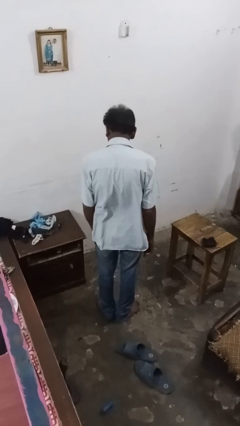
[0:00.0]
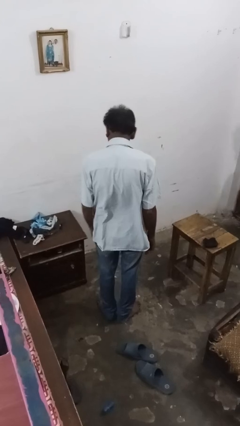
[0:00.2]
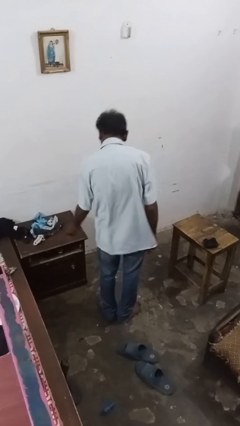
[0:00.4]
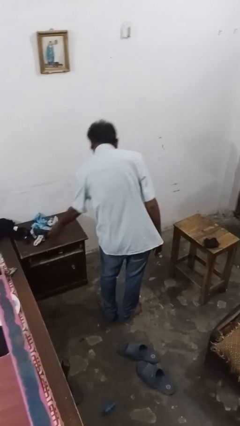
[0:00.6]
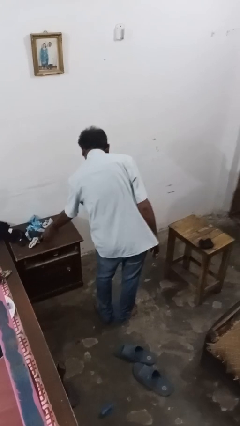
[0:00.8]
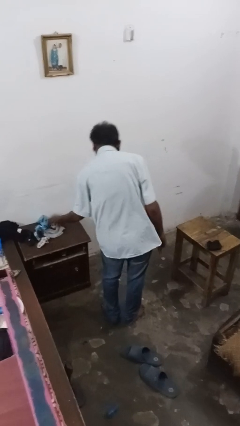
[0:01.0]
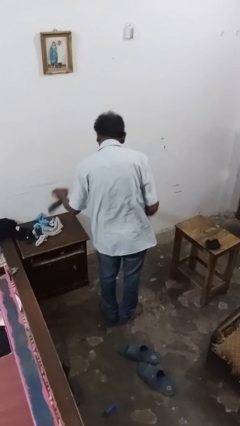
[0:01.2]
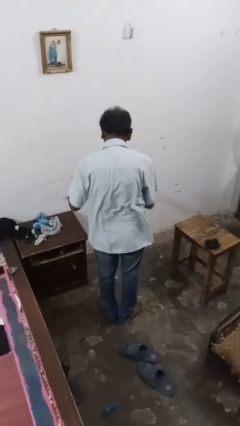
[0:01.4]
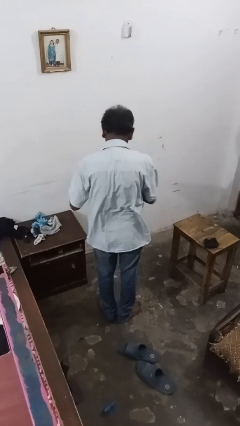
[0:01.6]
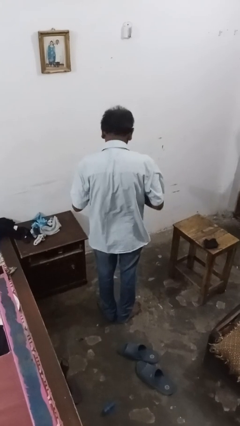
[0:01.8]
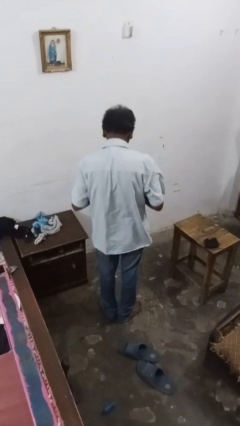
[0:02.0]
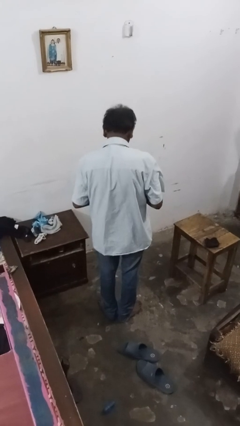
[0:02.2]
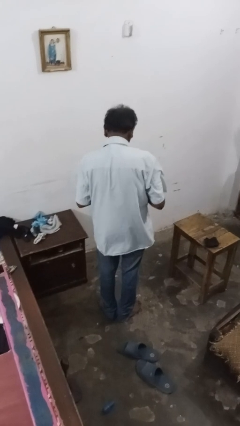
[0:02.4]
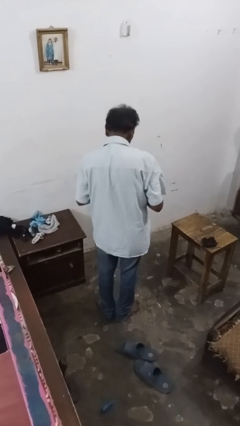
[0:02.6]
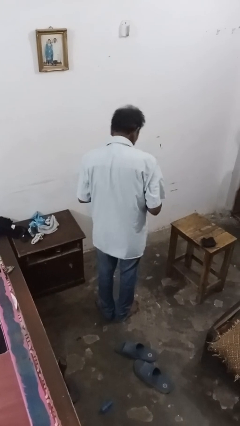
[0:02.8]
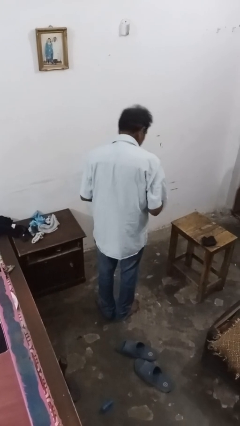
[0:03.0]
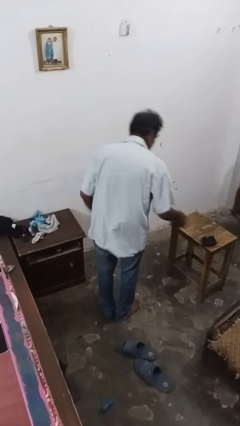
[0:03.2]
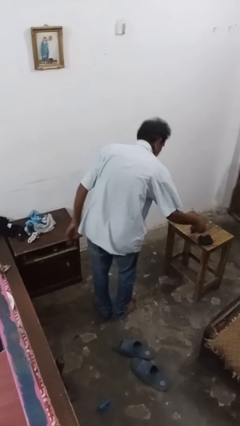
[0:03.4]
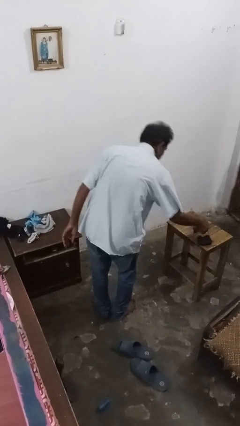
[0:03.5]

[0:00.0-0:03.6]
person folds socks

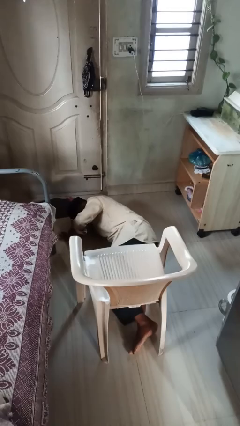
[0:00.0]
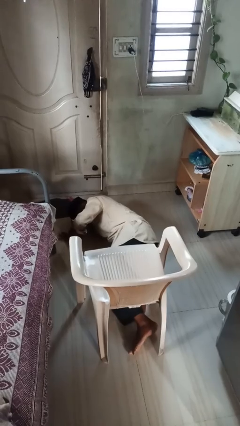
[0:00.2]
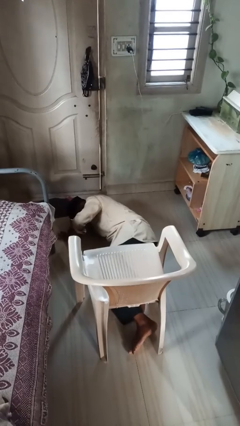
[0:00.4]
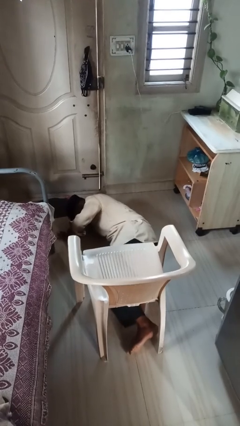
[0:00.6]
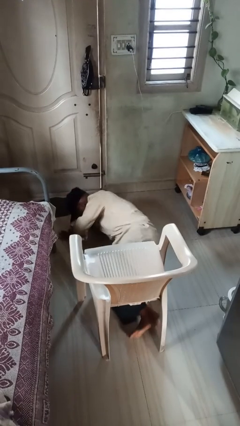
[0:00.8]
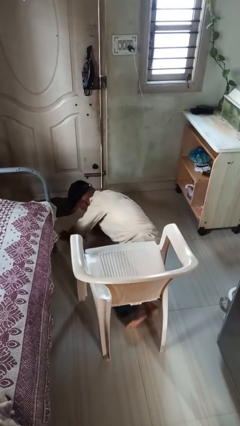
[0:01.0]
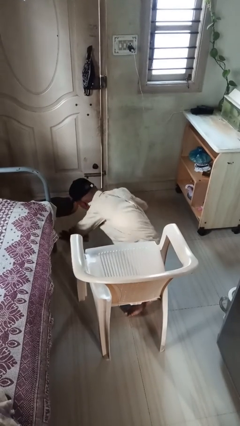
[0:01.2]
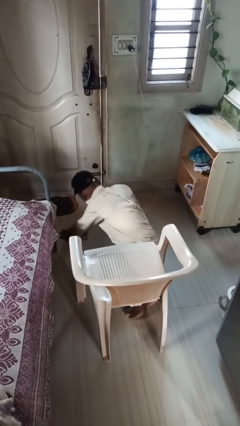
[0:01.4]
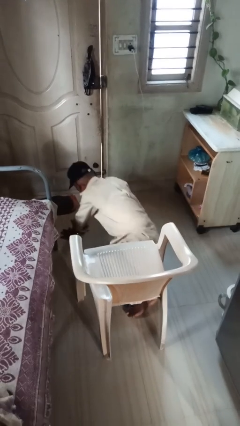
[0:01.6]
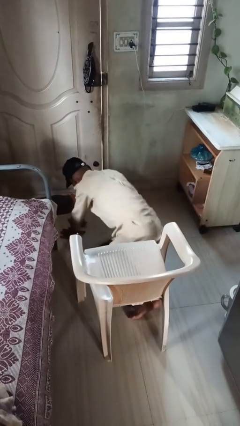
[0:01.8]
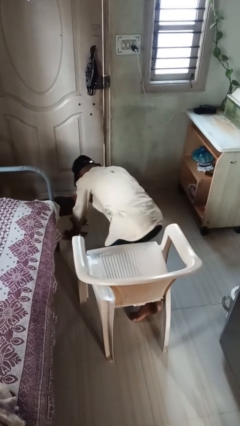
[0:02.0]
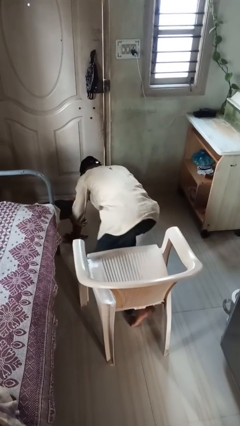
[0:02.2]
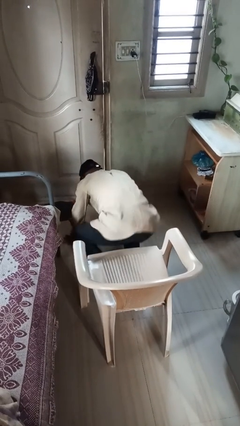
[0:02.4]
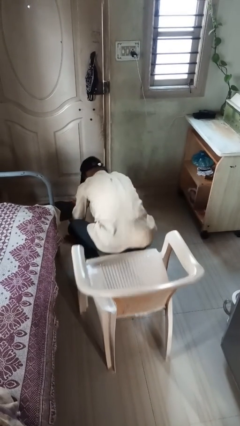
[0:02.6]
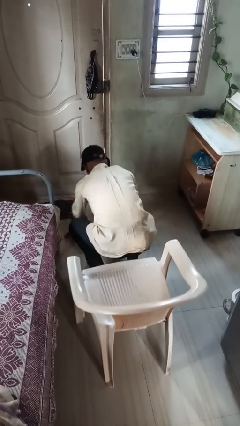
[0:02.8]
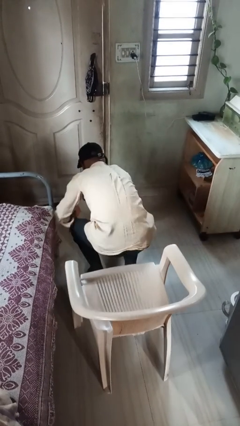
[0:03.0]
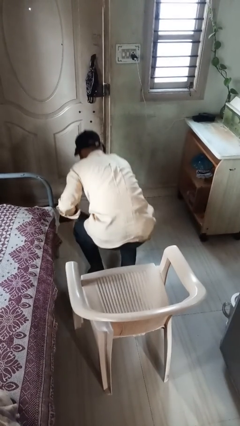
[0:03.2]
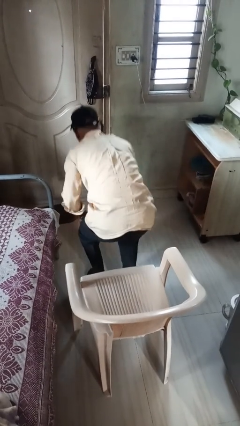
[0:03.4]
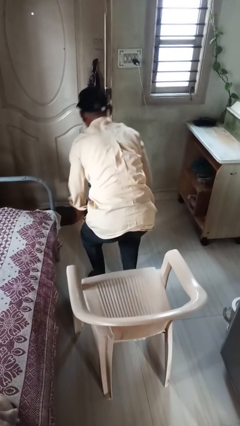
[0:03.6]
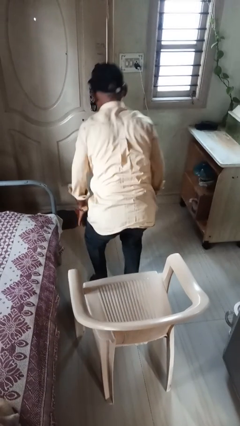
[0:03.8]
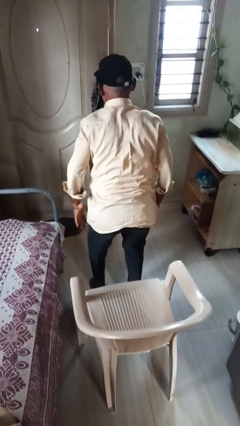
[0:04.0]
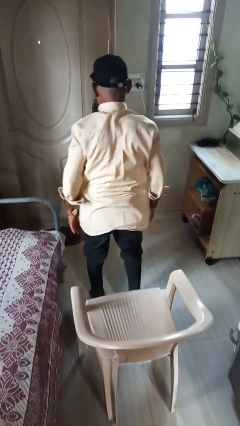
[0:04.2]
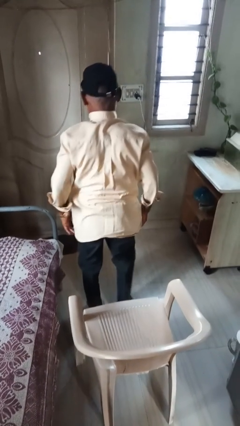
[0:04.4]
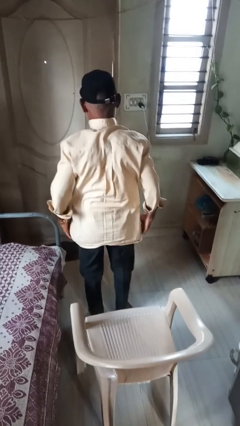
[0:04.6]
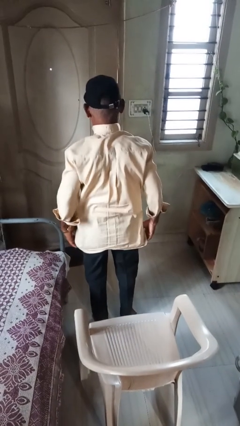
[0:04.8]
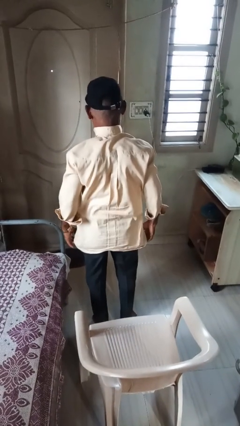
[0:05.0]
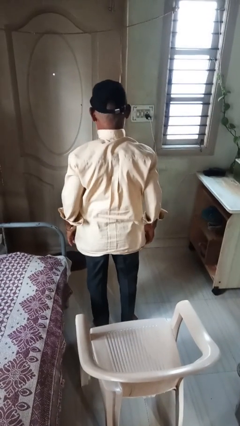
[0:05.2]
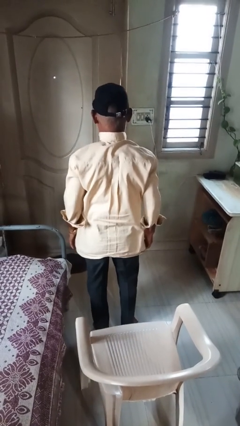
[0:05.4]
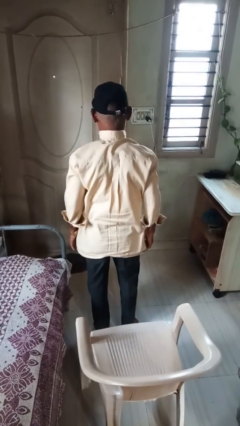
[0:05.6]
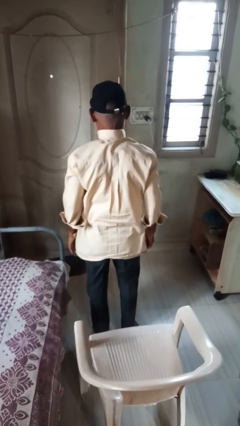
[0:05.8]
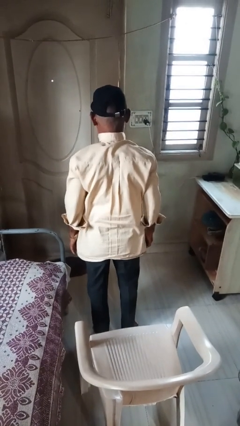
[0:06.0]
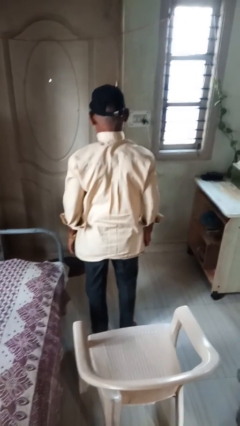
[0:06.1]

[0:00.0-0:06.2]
person stands up from floor

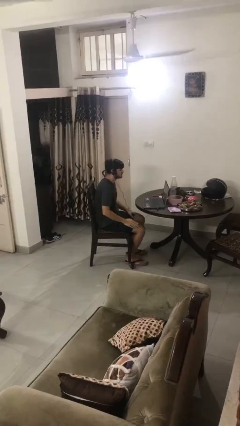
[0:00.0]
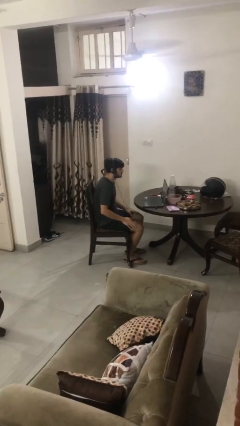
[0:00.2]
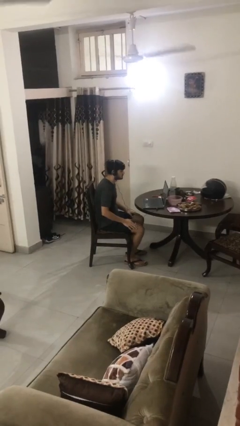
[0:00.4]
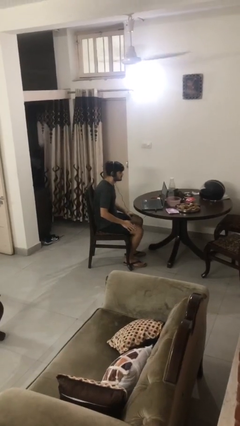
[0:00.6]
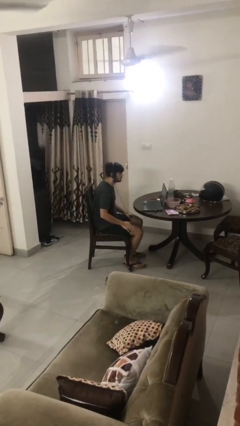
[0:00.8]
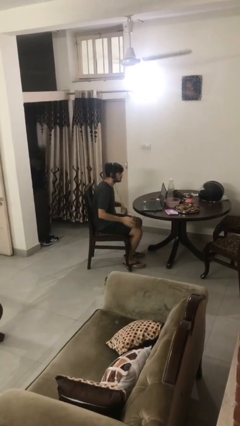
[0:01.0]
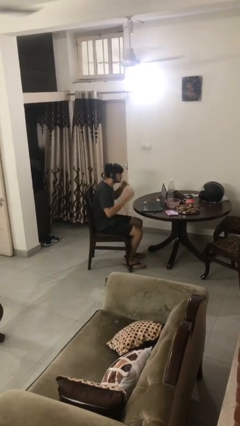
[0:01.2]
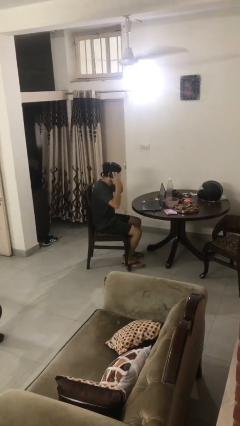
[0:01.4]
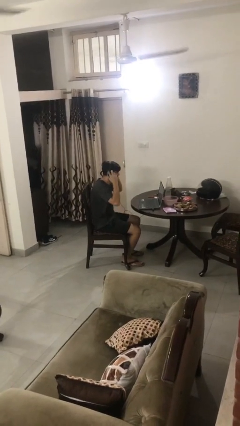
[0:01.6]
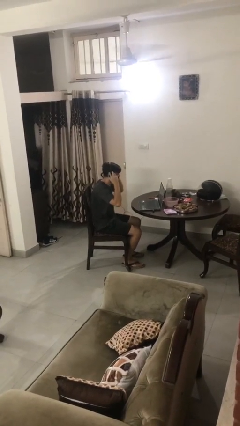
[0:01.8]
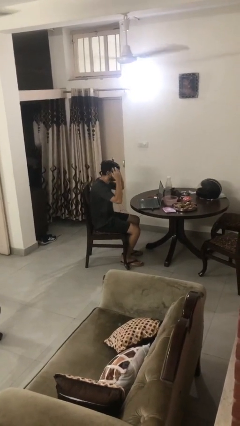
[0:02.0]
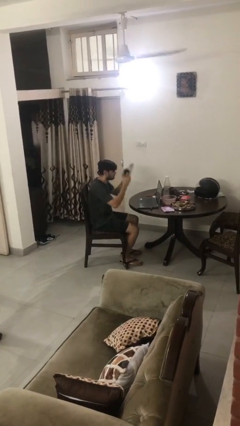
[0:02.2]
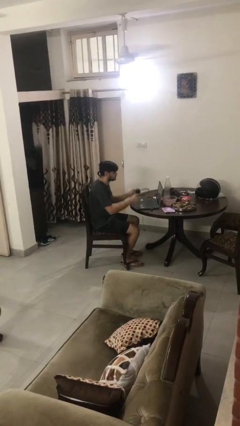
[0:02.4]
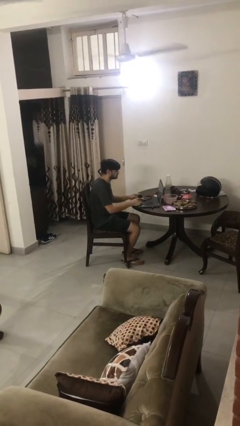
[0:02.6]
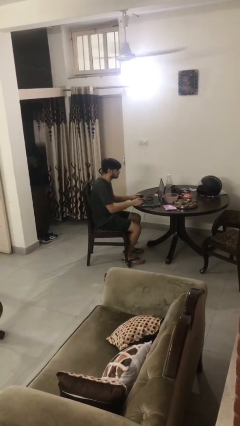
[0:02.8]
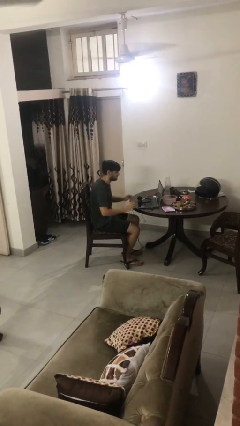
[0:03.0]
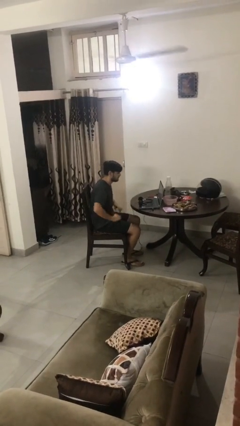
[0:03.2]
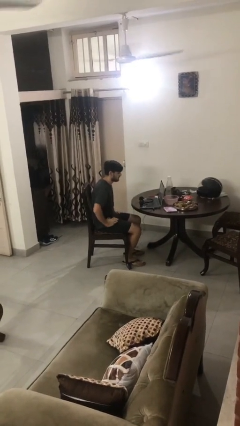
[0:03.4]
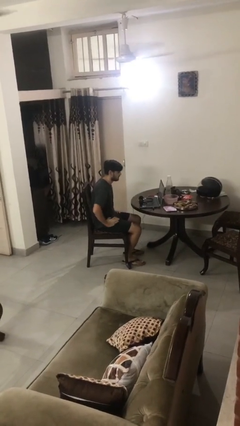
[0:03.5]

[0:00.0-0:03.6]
person takes off headphones

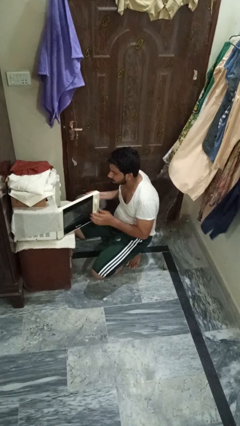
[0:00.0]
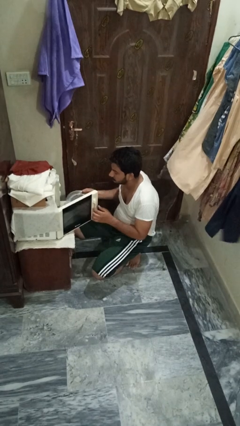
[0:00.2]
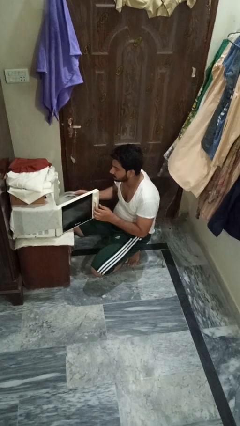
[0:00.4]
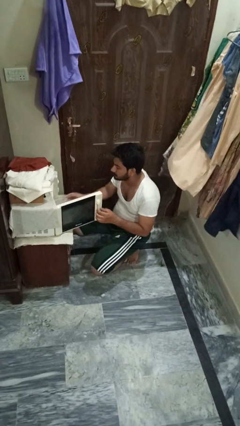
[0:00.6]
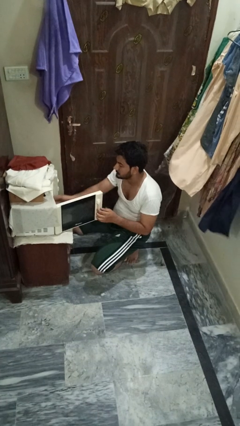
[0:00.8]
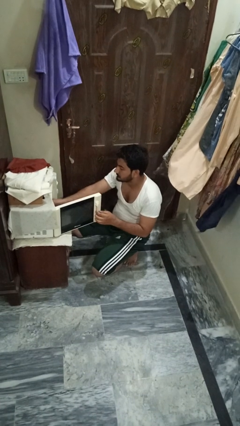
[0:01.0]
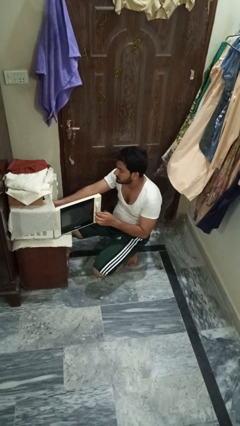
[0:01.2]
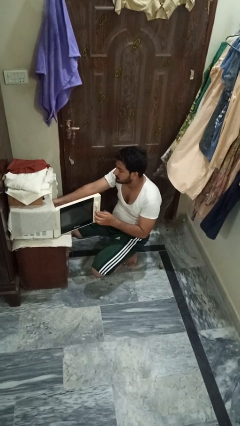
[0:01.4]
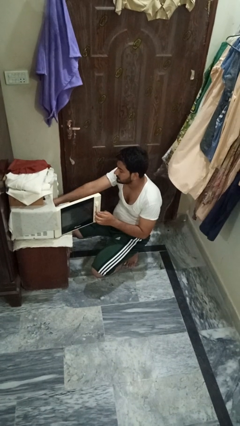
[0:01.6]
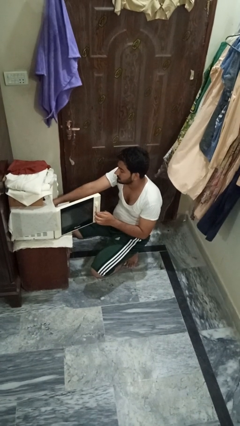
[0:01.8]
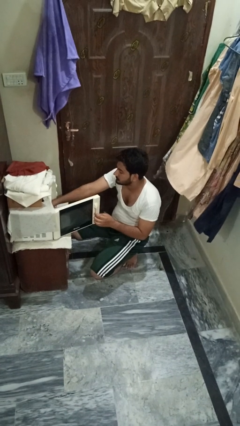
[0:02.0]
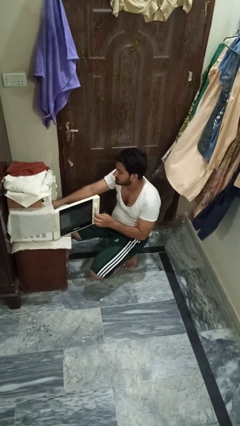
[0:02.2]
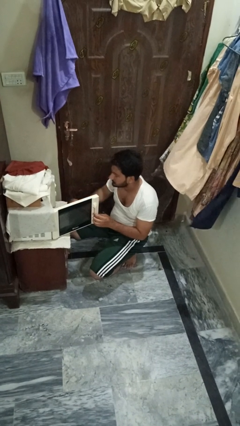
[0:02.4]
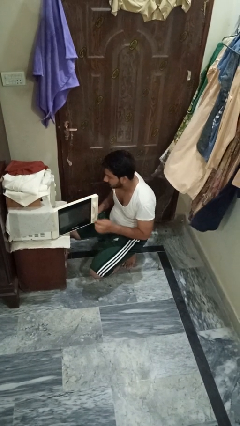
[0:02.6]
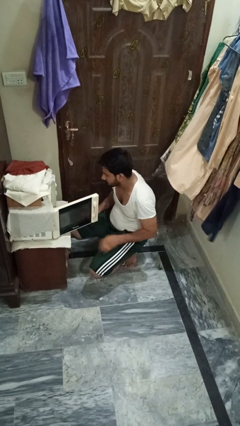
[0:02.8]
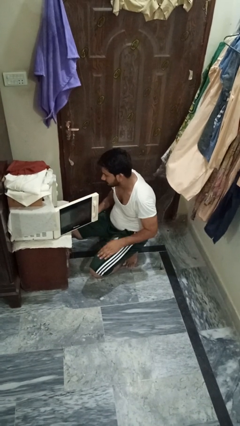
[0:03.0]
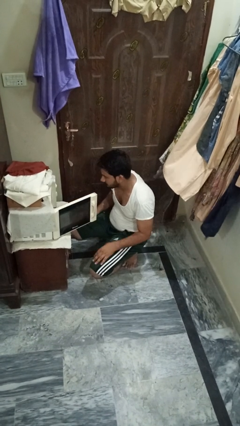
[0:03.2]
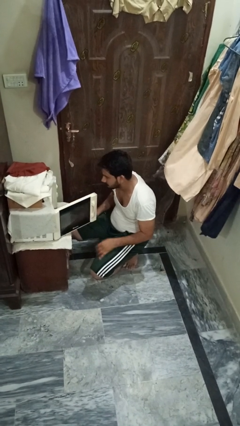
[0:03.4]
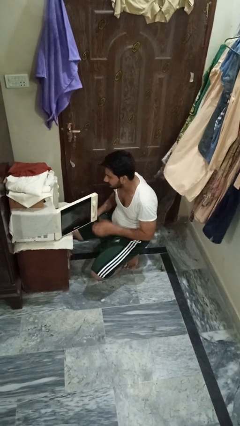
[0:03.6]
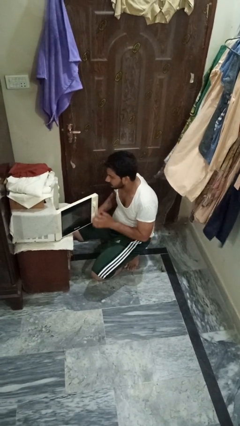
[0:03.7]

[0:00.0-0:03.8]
person puts object into oven

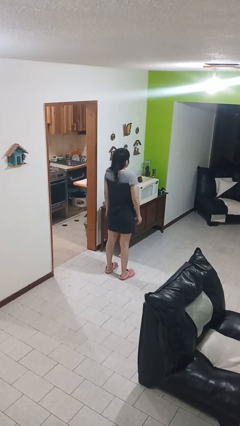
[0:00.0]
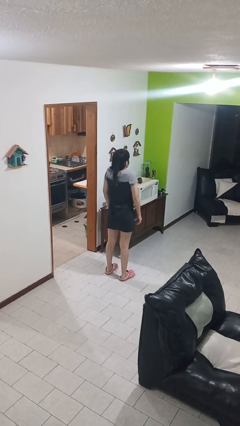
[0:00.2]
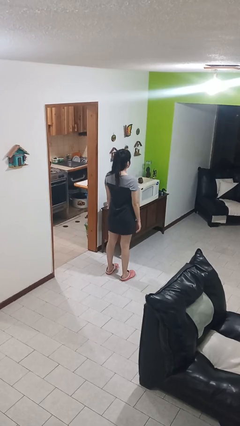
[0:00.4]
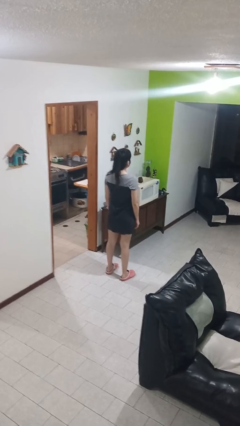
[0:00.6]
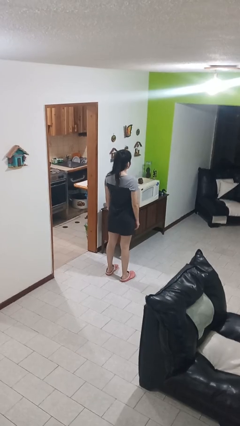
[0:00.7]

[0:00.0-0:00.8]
person shrugs
